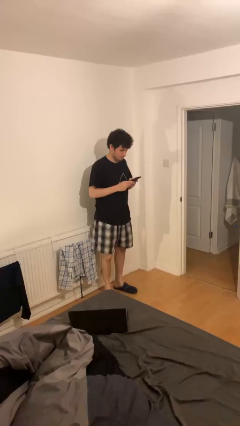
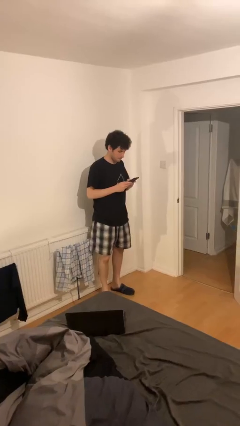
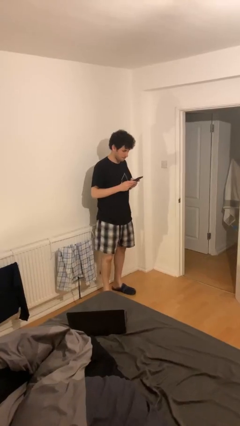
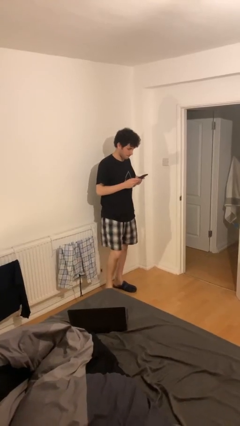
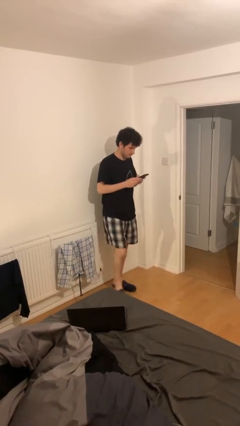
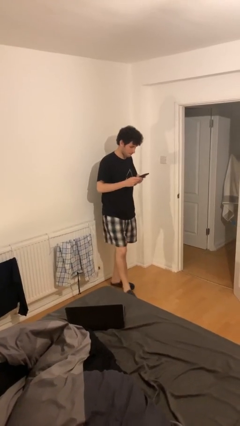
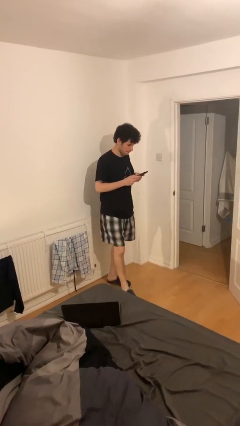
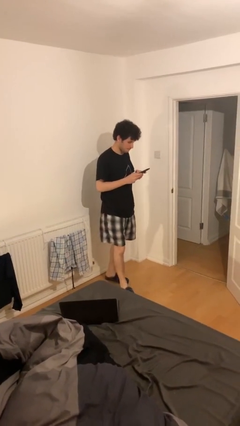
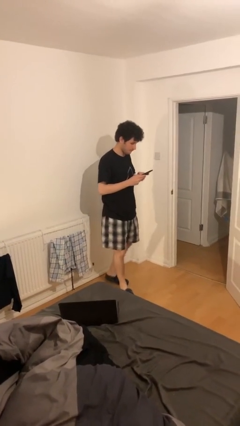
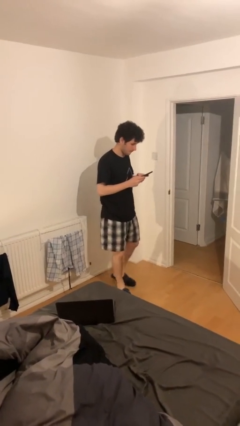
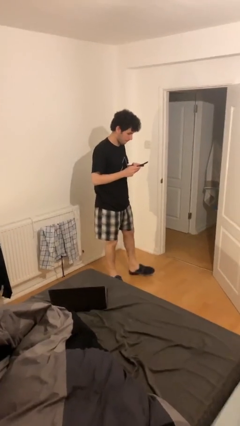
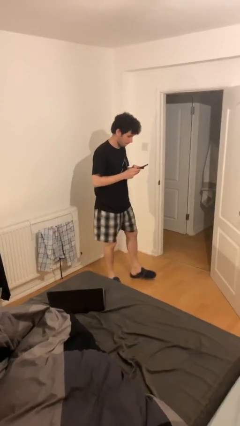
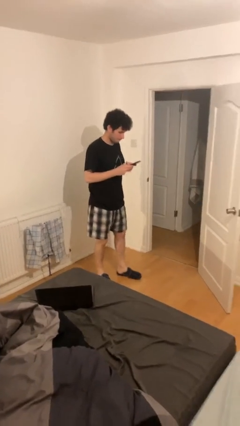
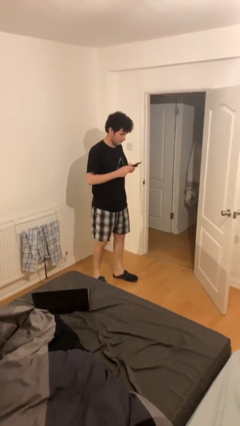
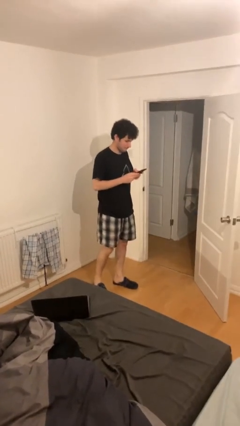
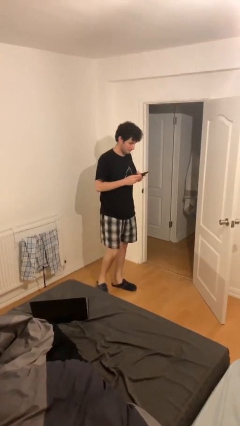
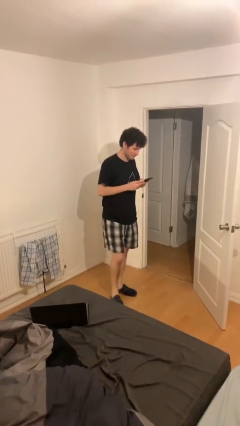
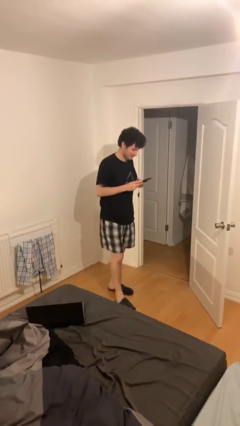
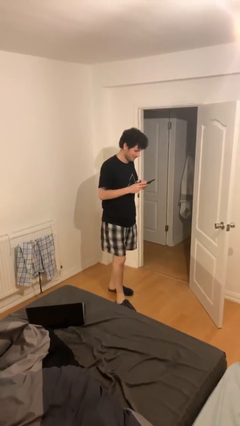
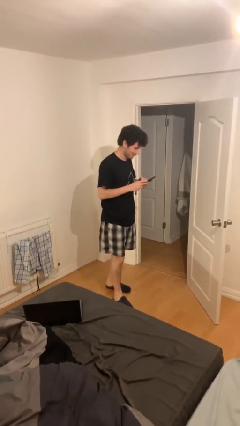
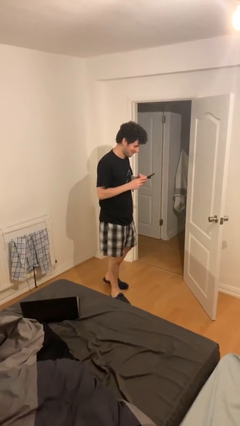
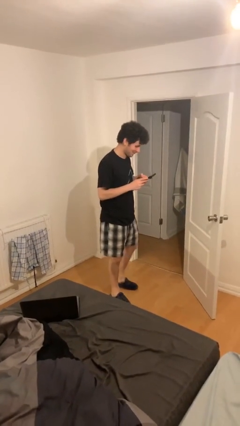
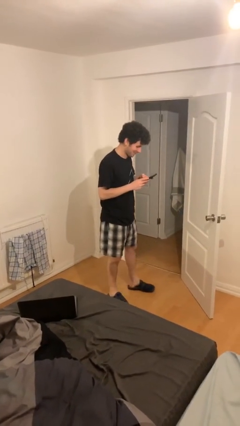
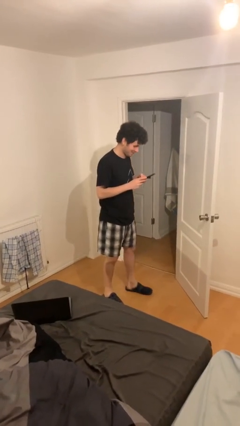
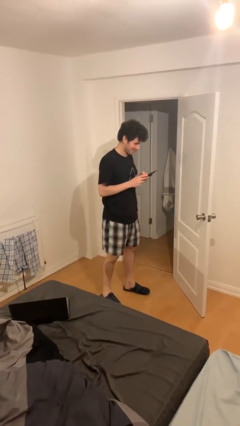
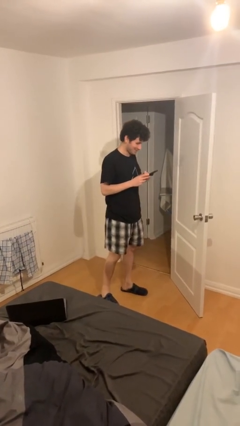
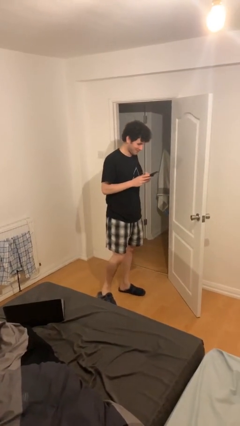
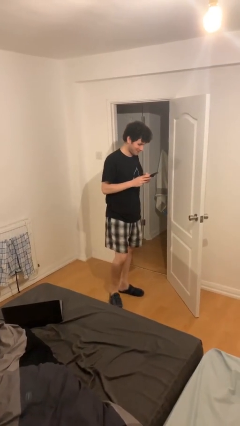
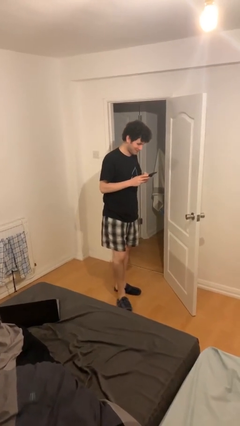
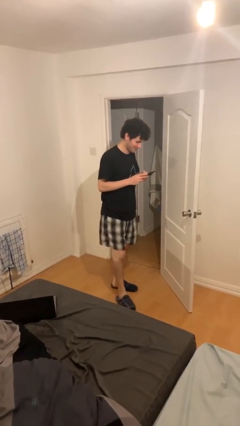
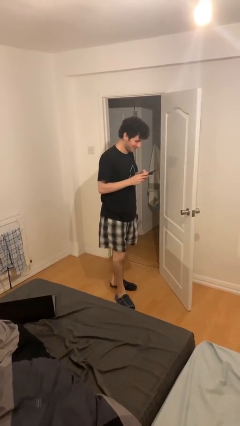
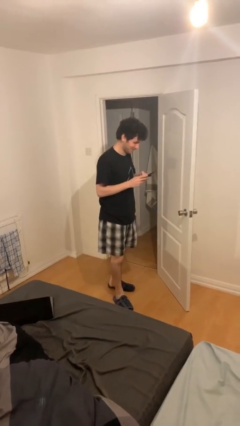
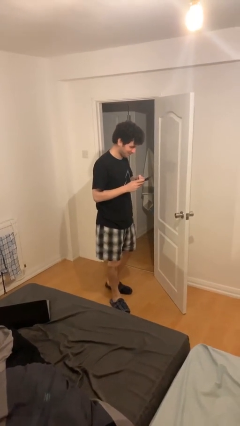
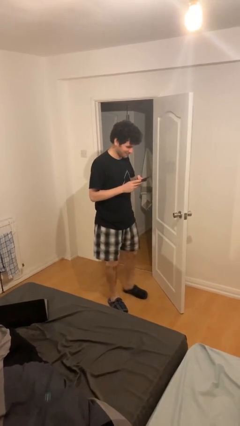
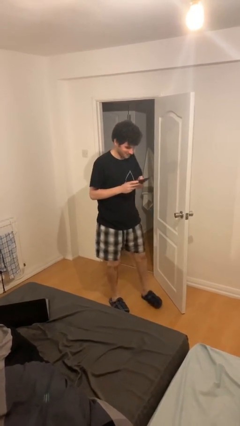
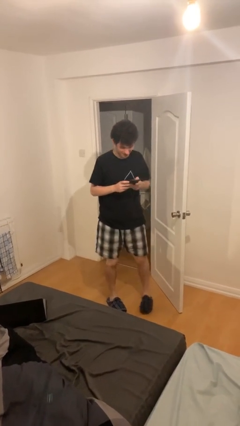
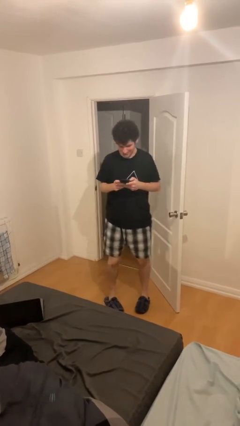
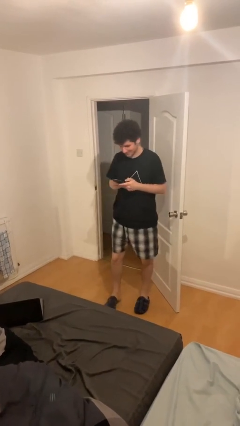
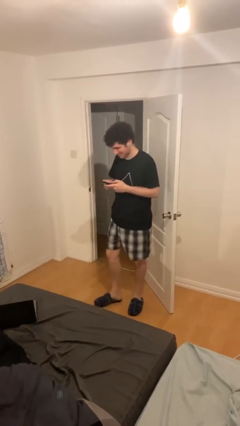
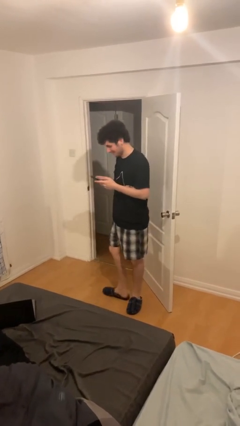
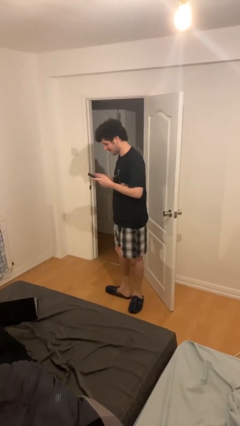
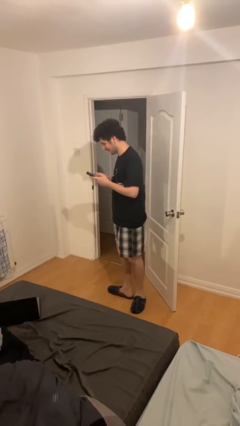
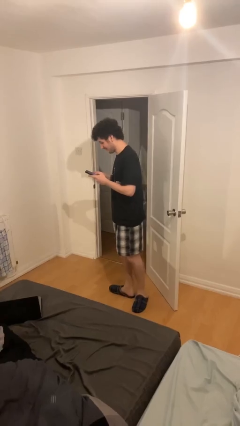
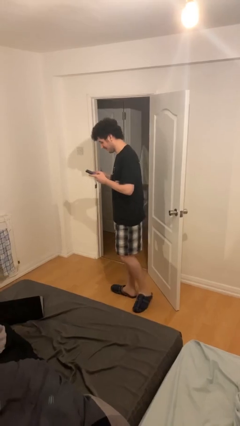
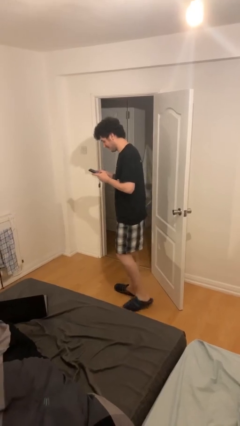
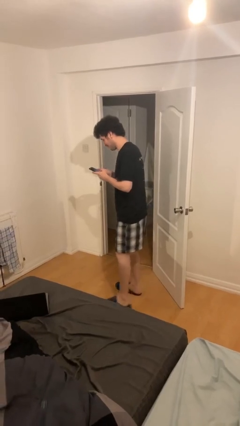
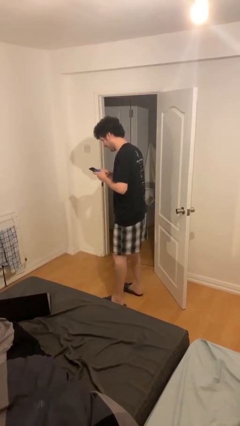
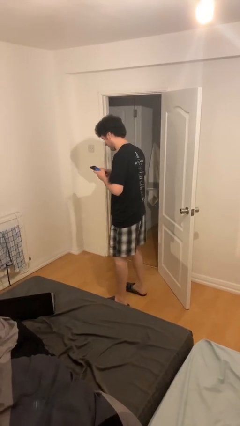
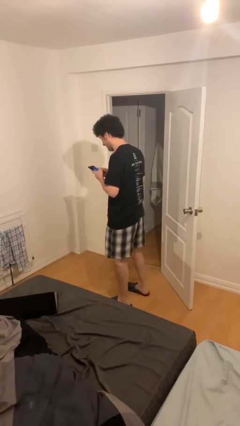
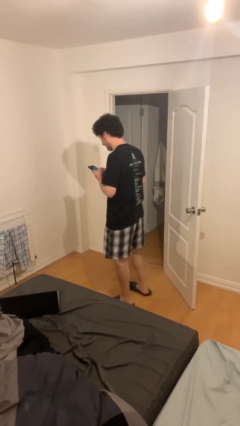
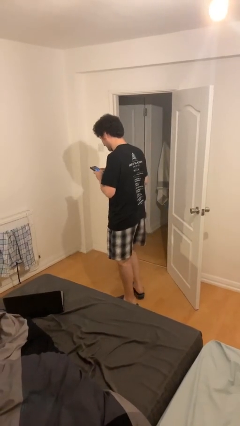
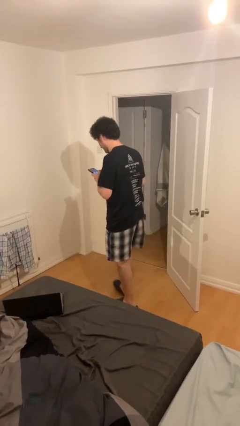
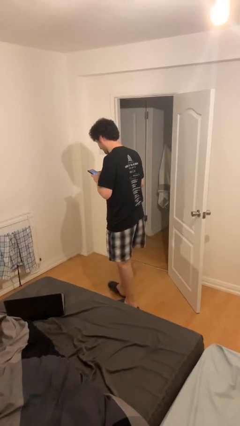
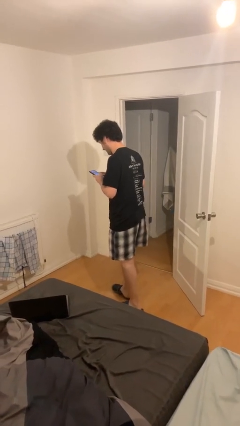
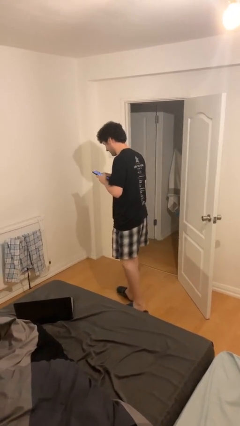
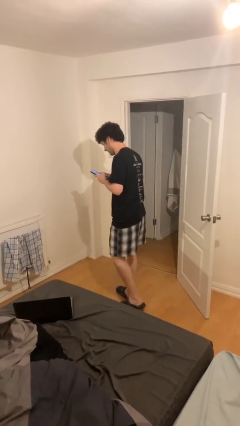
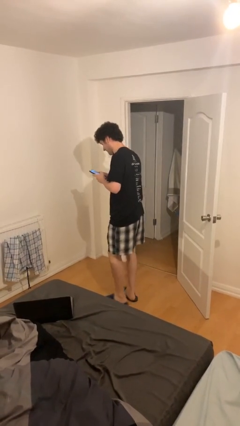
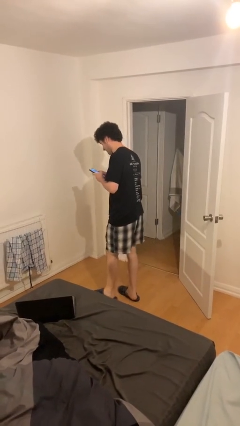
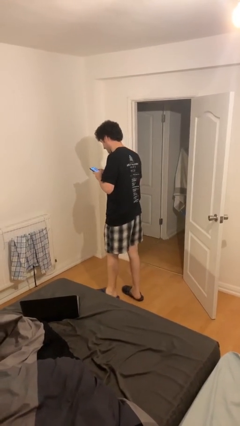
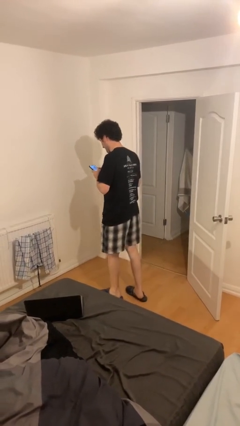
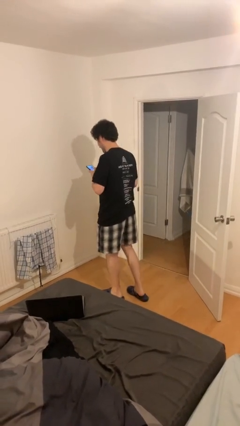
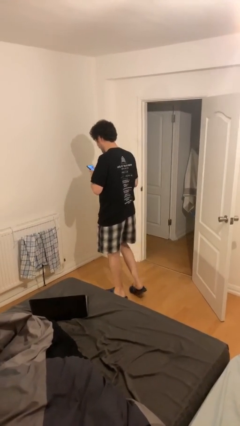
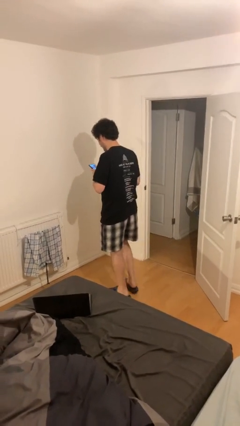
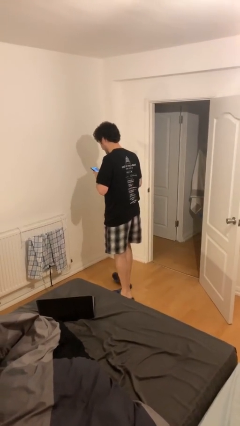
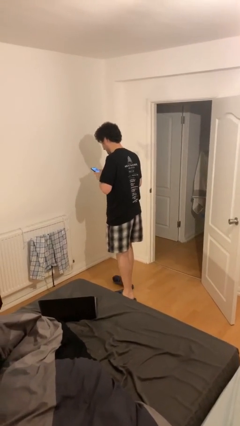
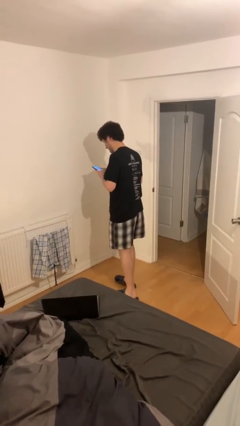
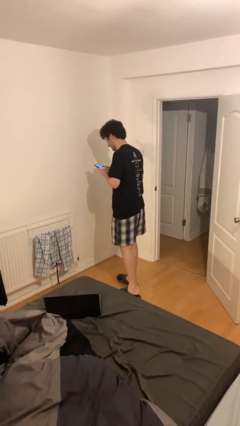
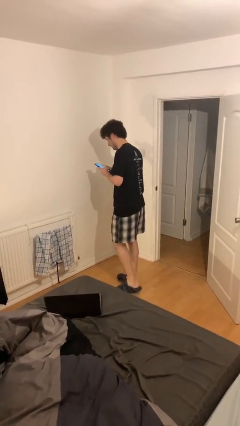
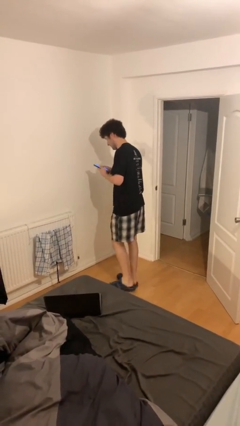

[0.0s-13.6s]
person texts on phone

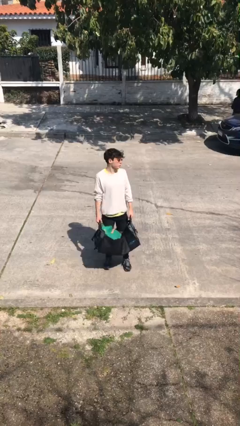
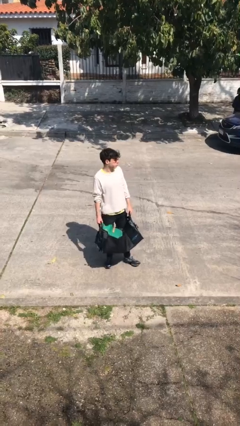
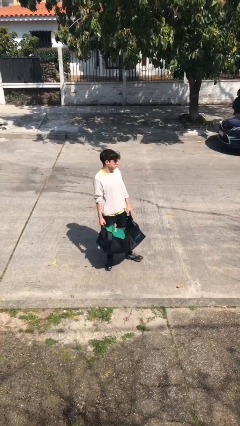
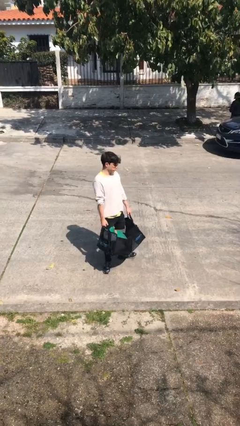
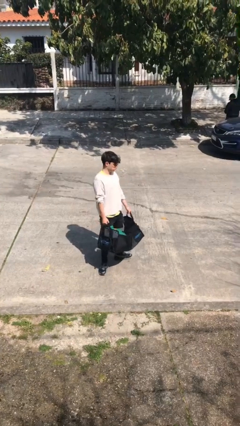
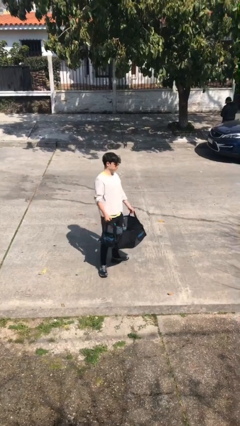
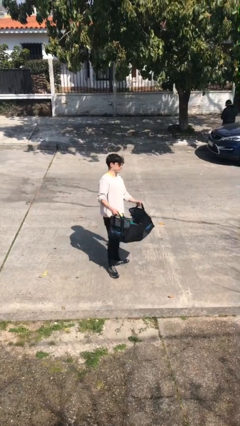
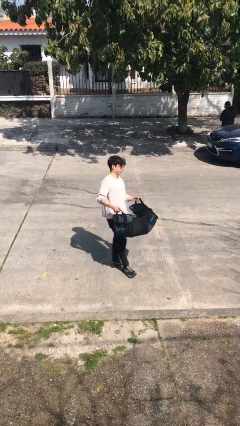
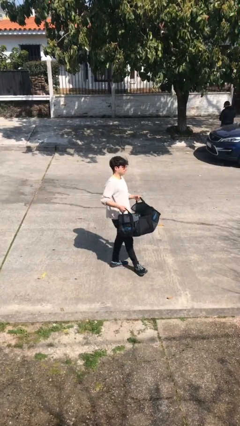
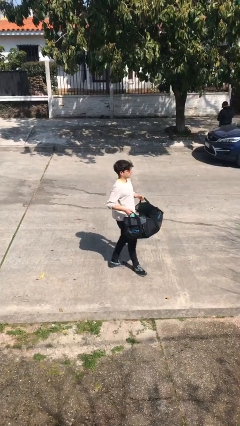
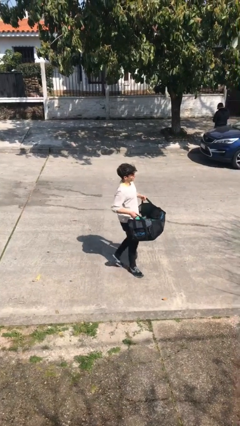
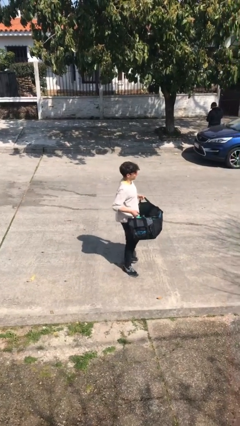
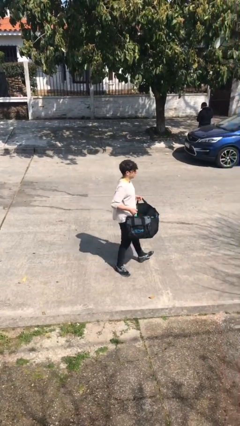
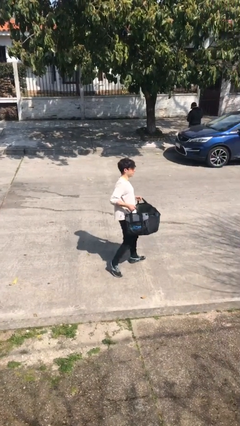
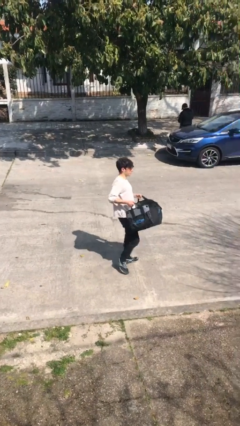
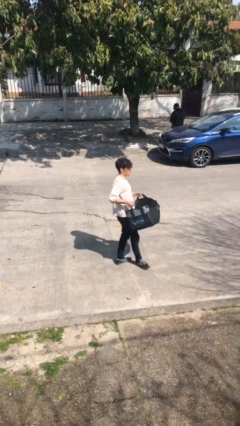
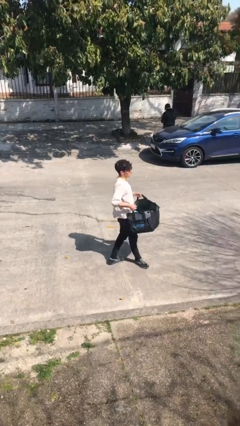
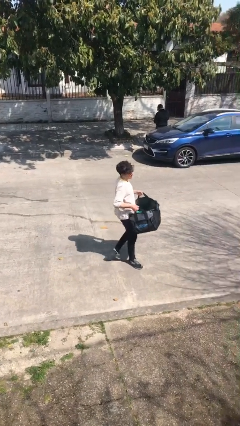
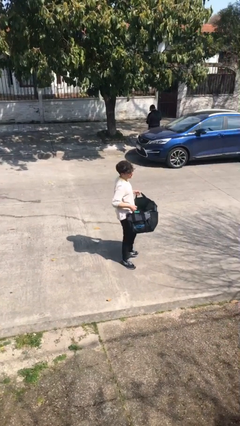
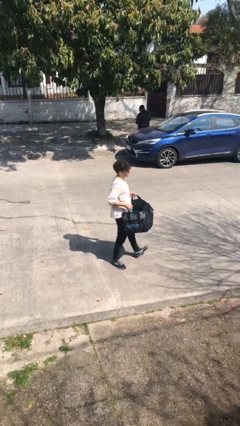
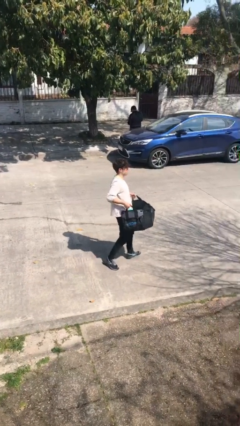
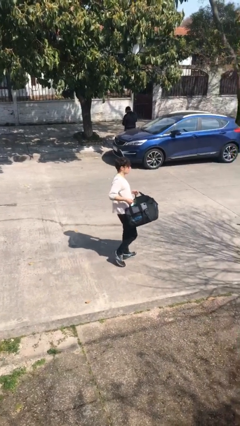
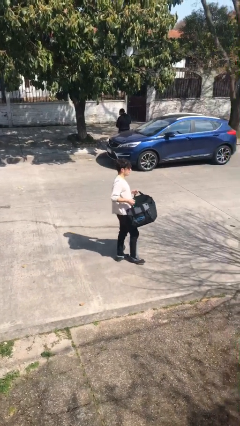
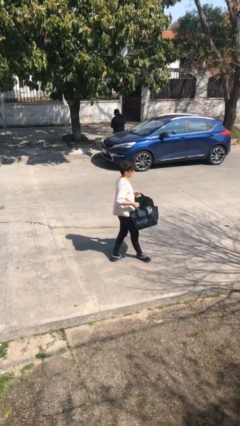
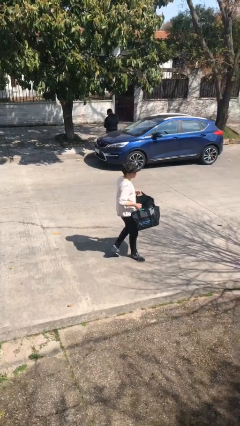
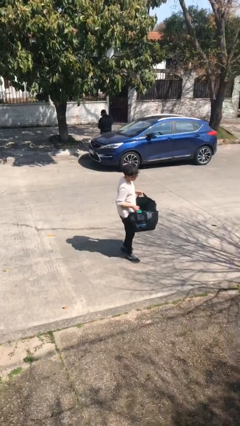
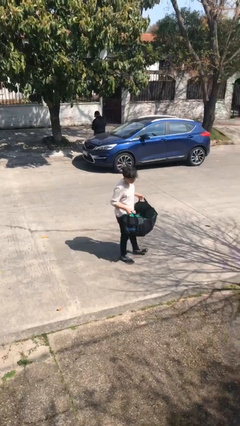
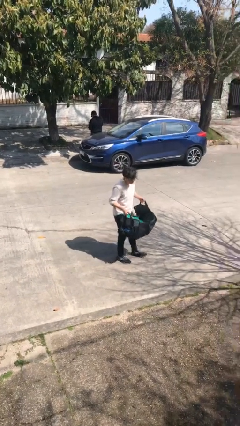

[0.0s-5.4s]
person carries heavy object
